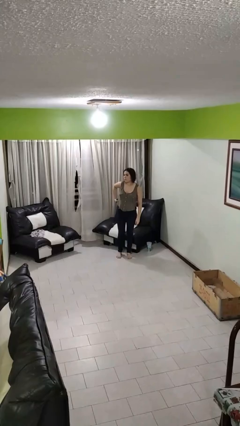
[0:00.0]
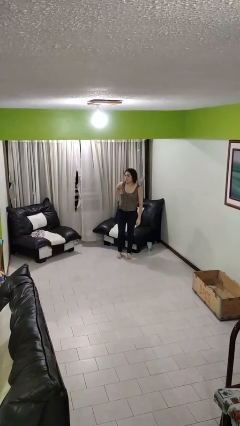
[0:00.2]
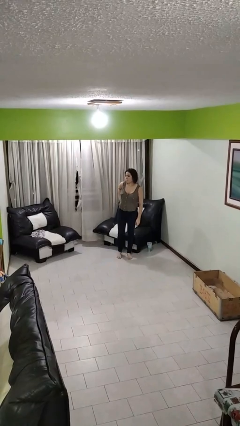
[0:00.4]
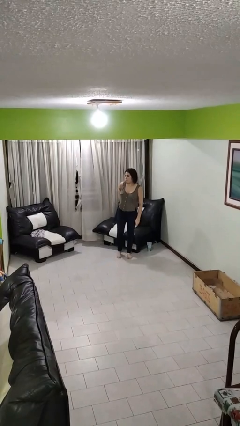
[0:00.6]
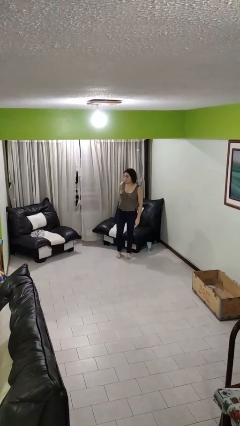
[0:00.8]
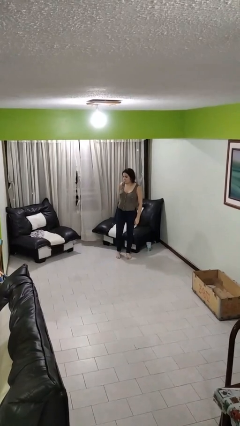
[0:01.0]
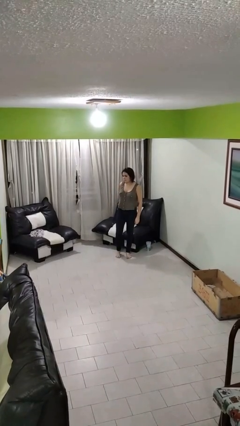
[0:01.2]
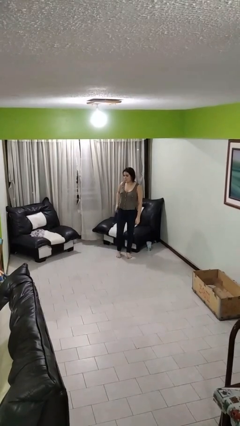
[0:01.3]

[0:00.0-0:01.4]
person puts phone into pocket

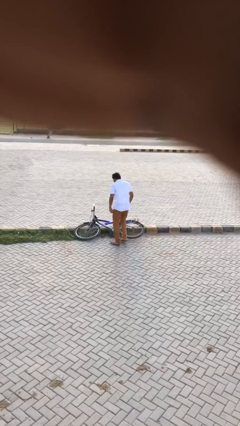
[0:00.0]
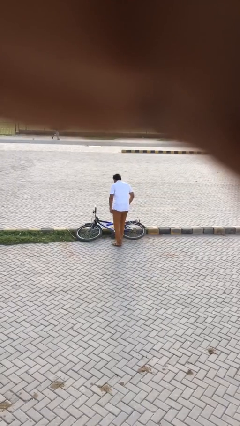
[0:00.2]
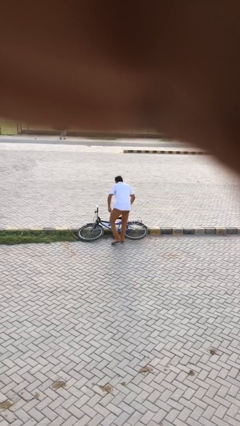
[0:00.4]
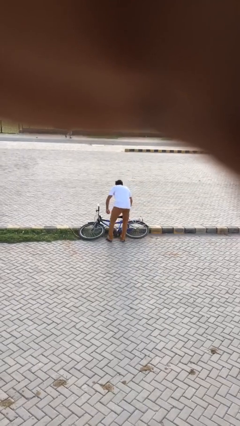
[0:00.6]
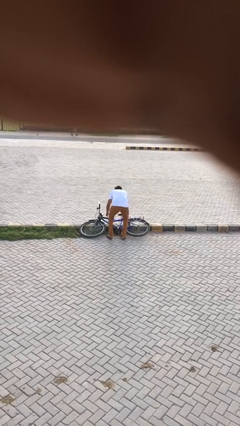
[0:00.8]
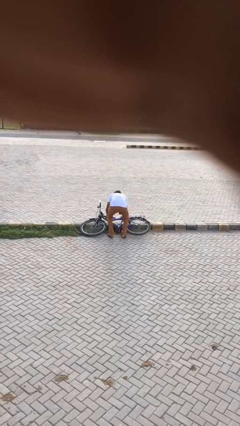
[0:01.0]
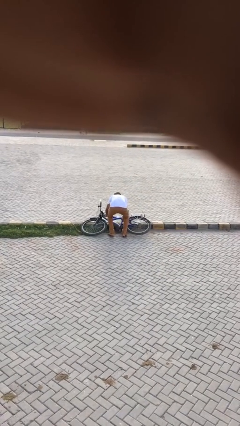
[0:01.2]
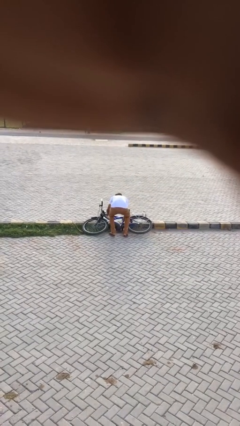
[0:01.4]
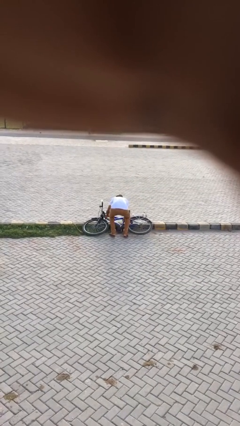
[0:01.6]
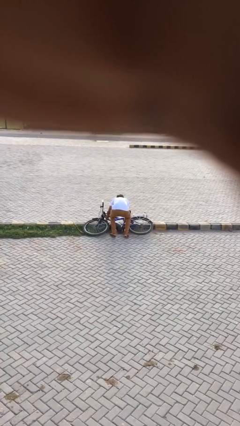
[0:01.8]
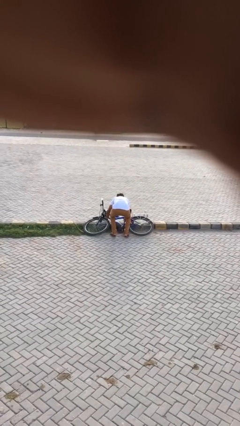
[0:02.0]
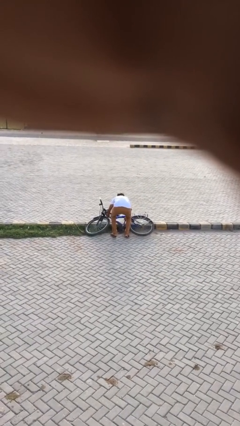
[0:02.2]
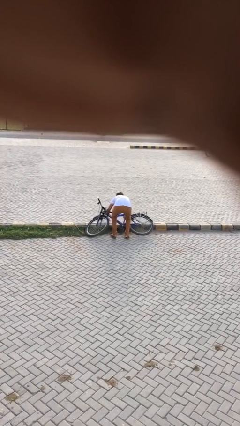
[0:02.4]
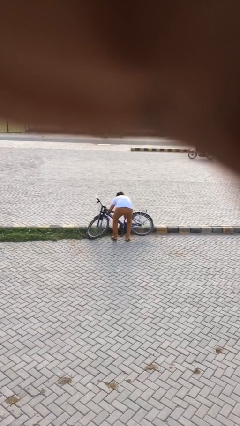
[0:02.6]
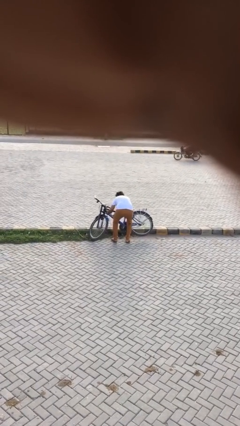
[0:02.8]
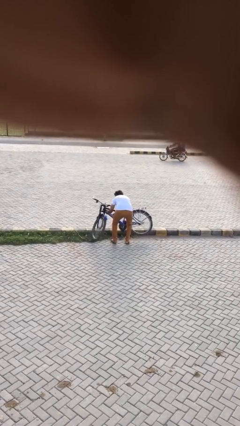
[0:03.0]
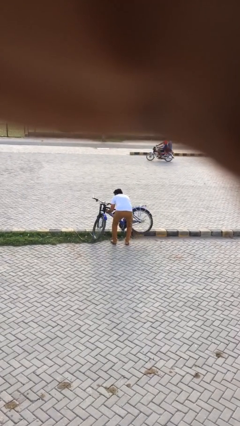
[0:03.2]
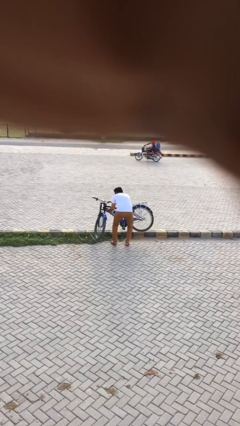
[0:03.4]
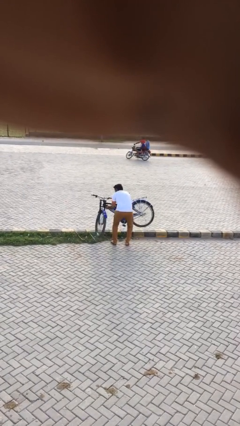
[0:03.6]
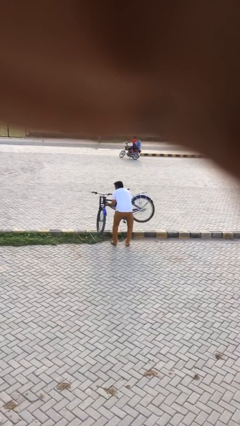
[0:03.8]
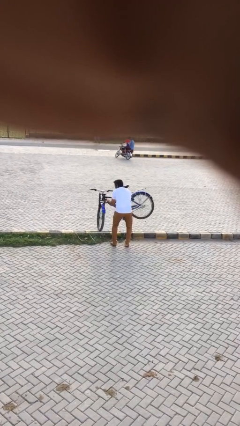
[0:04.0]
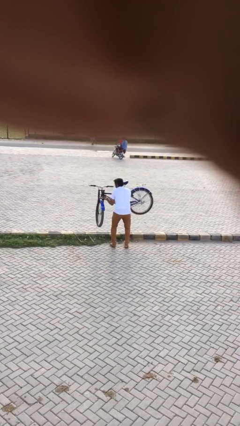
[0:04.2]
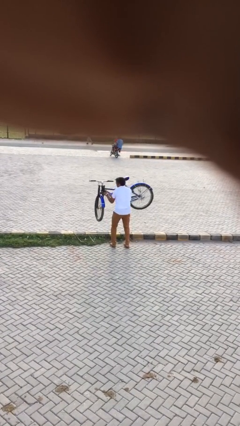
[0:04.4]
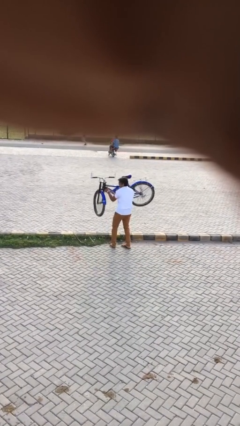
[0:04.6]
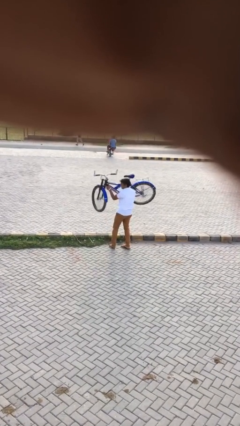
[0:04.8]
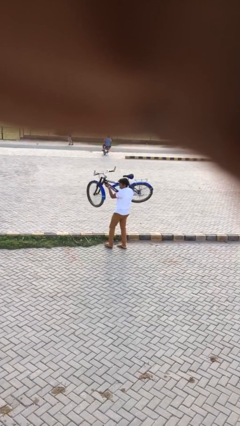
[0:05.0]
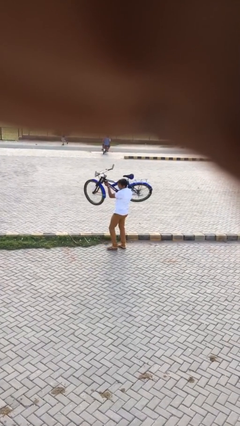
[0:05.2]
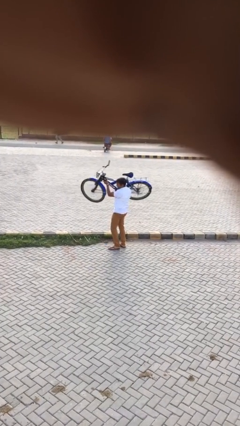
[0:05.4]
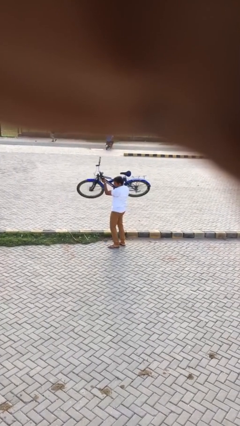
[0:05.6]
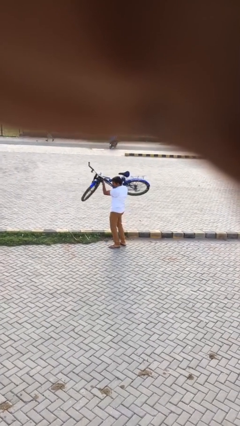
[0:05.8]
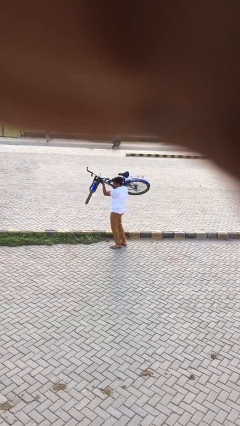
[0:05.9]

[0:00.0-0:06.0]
person picks up object from floor

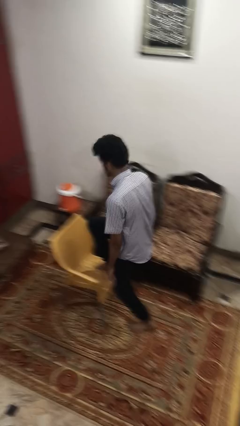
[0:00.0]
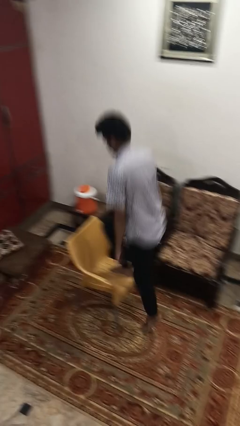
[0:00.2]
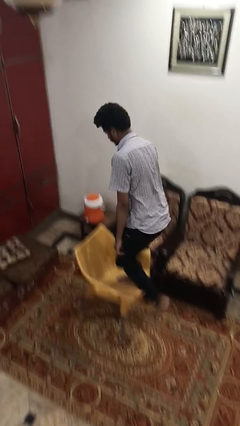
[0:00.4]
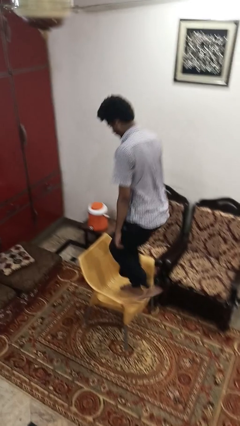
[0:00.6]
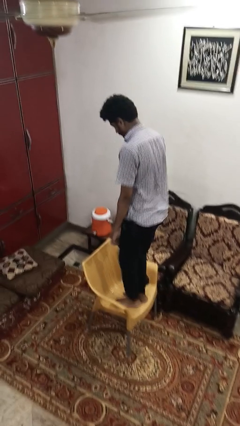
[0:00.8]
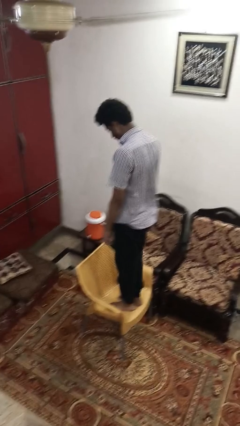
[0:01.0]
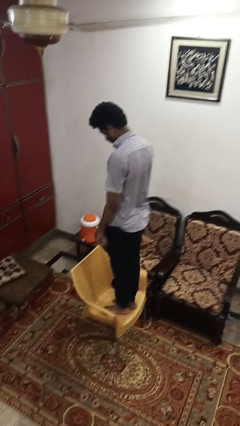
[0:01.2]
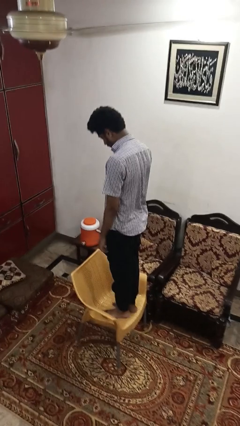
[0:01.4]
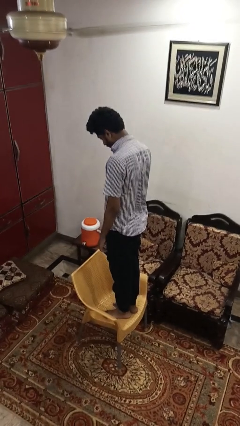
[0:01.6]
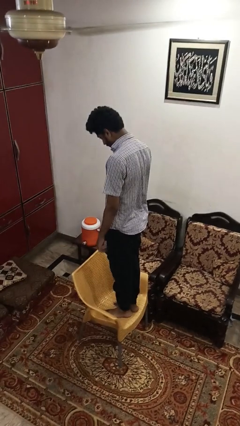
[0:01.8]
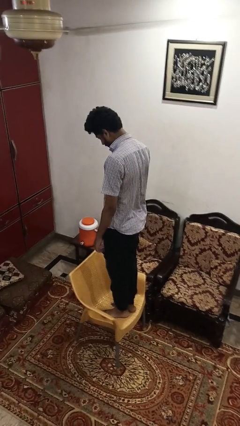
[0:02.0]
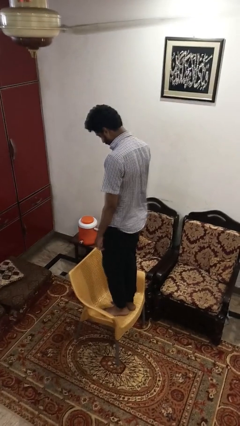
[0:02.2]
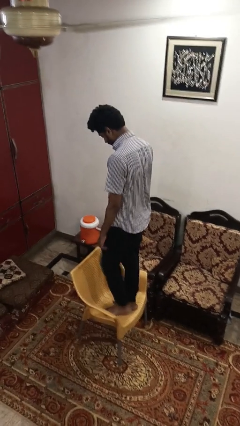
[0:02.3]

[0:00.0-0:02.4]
person climbs on chair

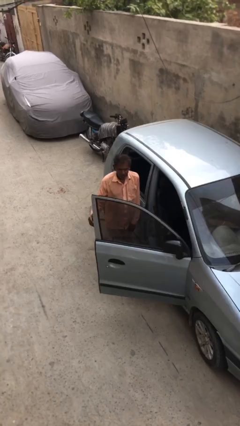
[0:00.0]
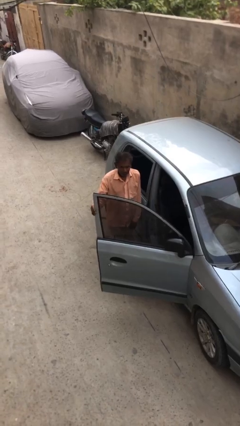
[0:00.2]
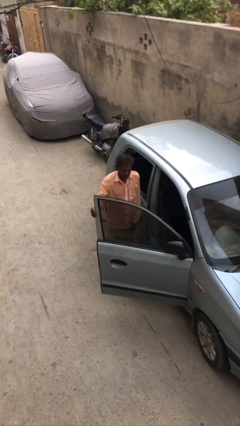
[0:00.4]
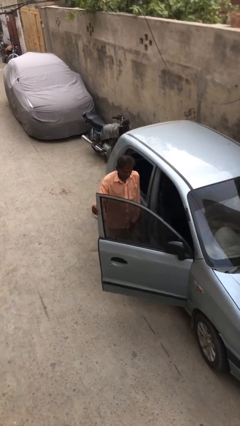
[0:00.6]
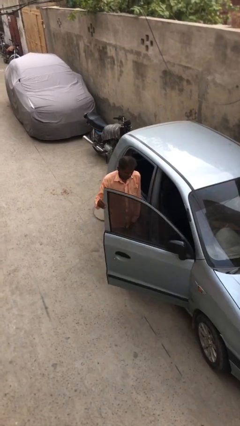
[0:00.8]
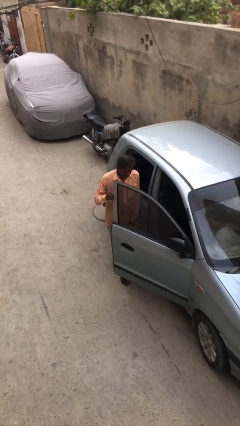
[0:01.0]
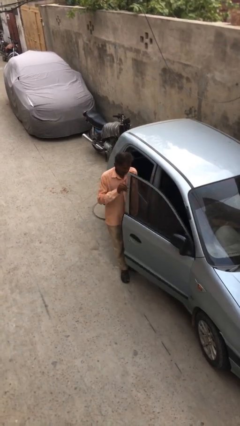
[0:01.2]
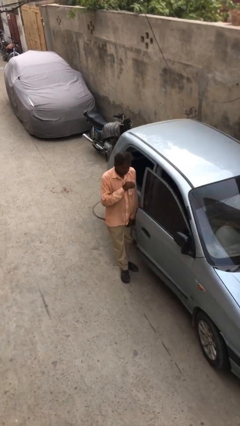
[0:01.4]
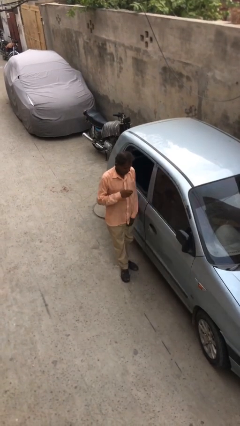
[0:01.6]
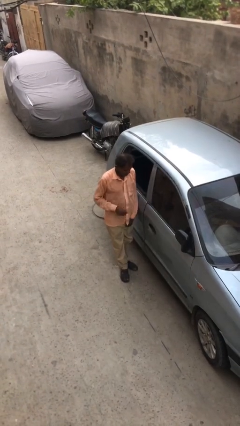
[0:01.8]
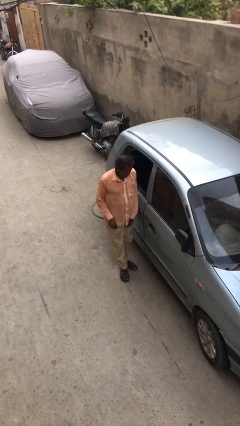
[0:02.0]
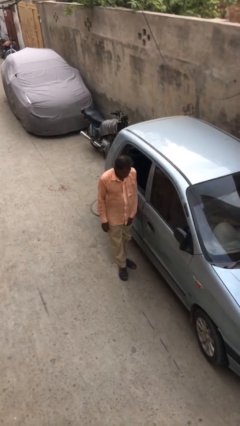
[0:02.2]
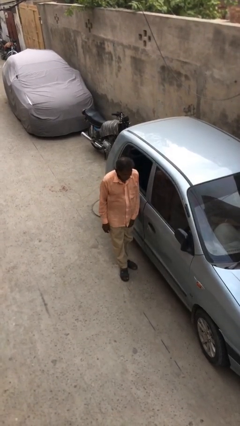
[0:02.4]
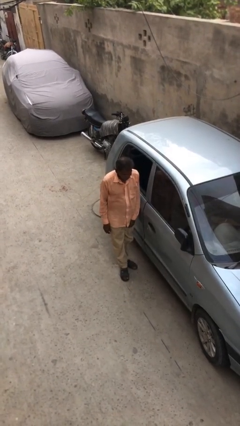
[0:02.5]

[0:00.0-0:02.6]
person closes car door

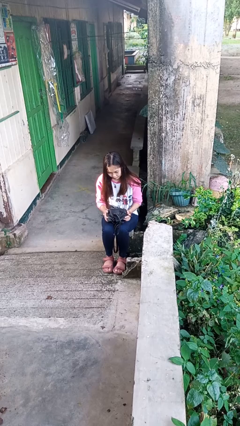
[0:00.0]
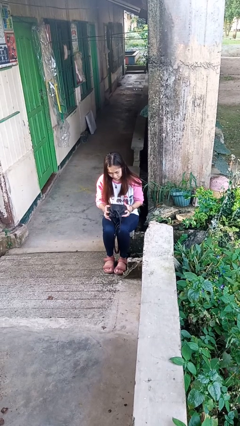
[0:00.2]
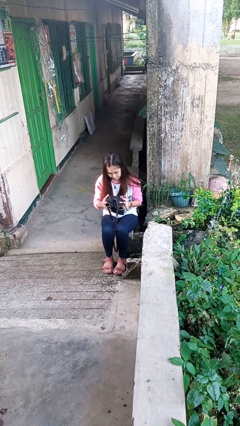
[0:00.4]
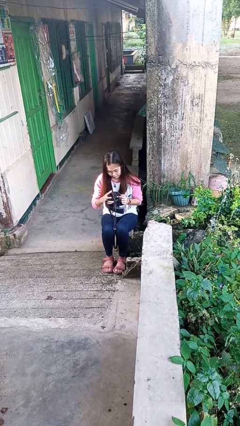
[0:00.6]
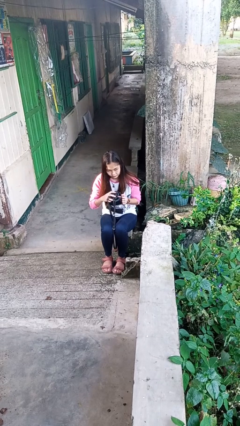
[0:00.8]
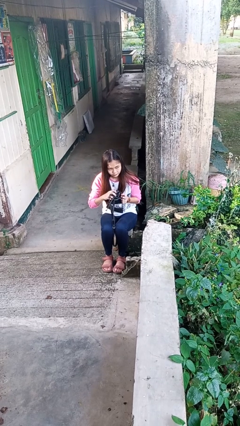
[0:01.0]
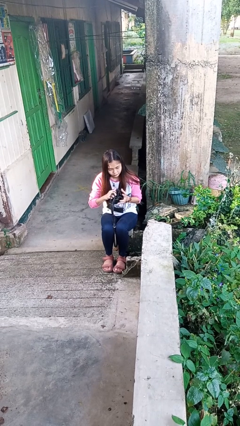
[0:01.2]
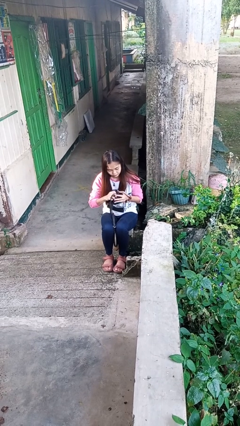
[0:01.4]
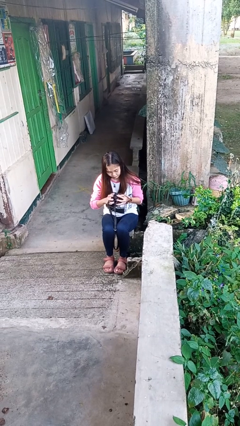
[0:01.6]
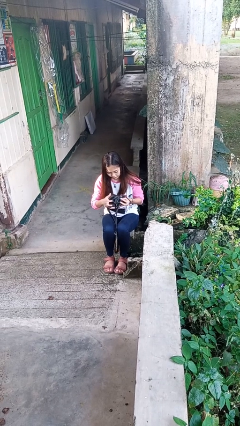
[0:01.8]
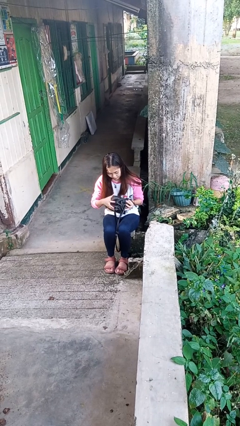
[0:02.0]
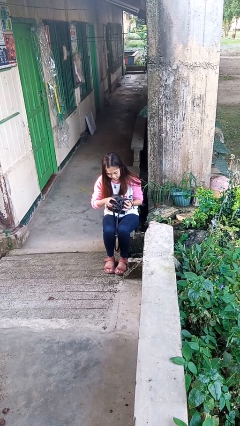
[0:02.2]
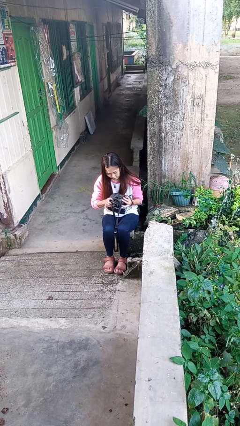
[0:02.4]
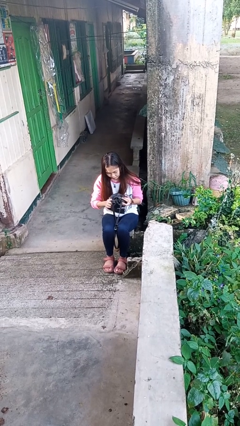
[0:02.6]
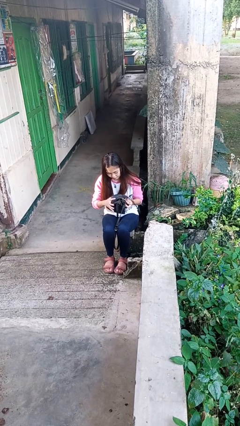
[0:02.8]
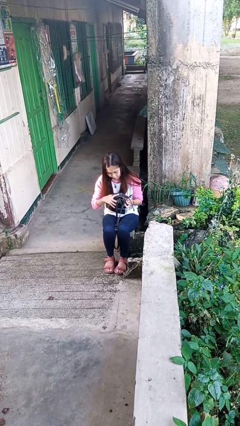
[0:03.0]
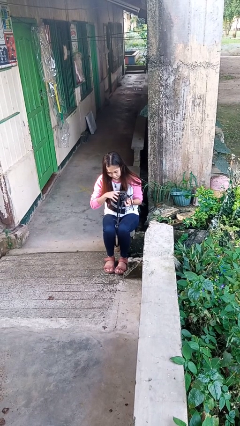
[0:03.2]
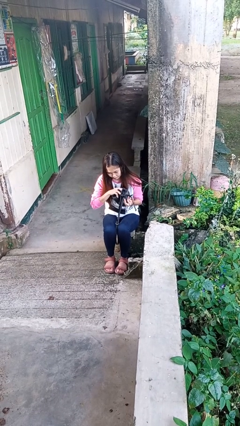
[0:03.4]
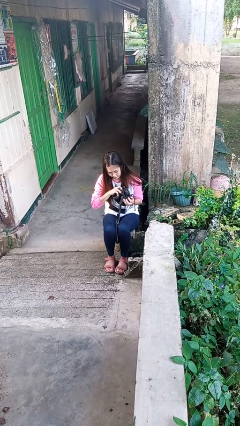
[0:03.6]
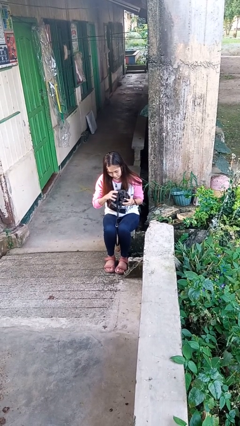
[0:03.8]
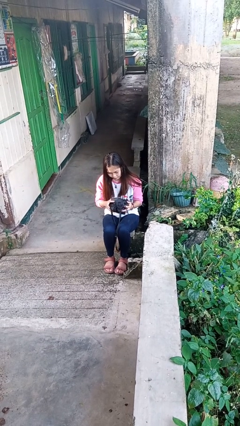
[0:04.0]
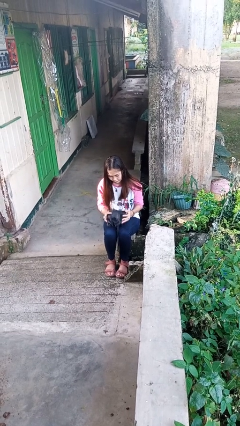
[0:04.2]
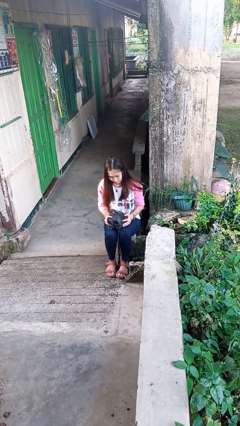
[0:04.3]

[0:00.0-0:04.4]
person squeezes object

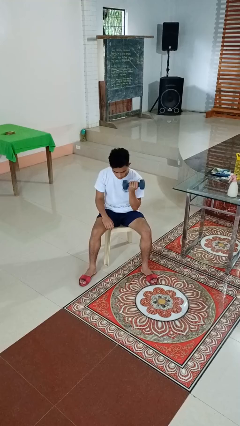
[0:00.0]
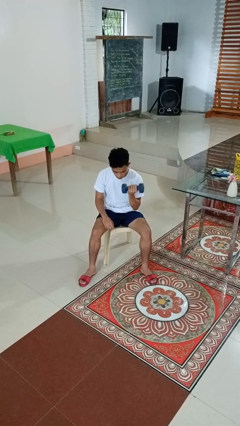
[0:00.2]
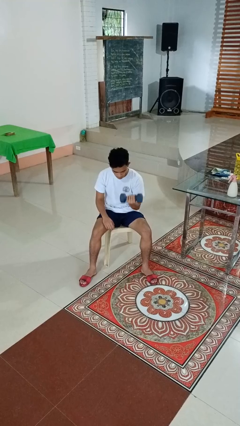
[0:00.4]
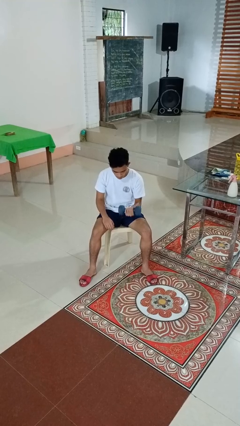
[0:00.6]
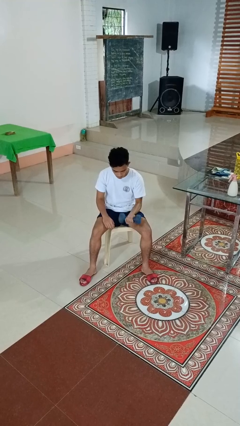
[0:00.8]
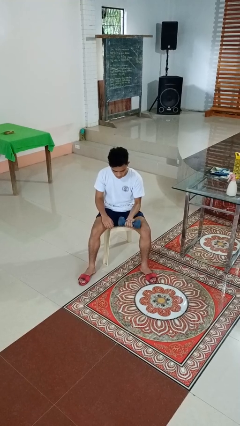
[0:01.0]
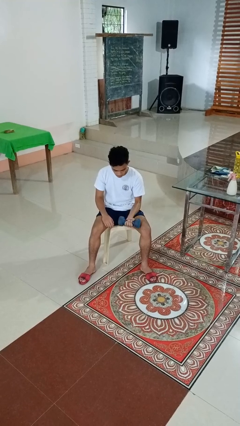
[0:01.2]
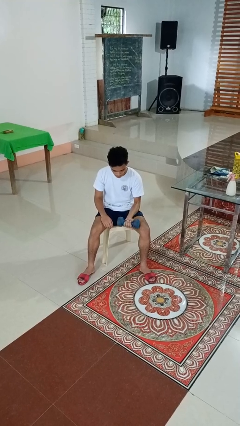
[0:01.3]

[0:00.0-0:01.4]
person lifts dumbbells
